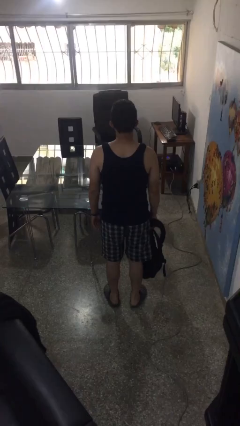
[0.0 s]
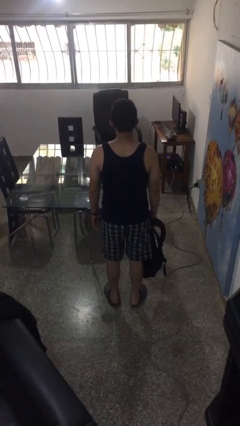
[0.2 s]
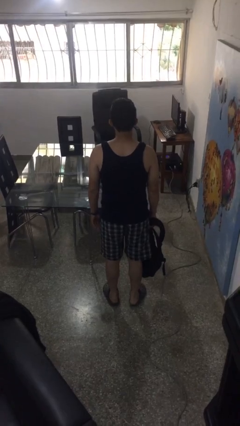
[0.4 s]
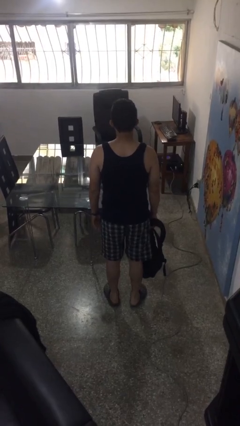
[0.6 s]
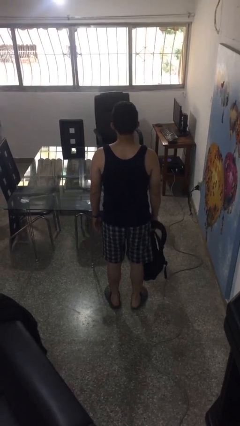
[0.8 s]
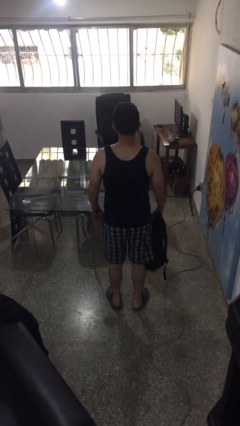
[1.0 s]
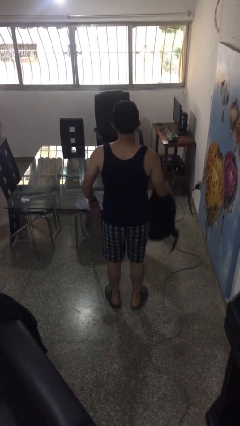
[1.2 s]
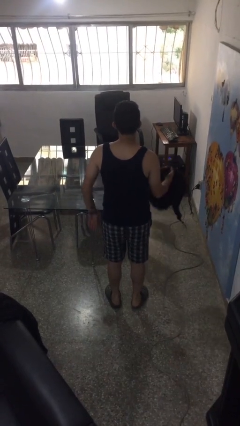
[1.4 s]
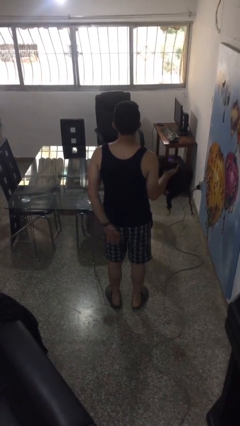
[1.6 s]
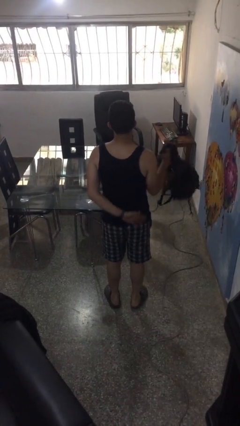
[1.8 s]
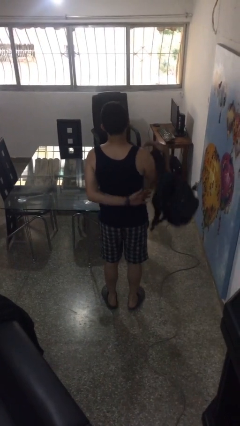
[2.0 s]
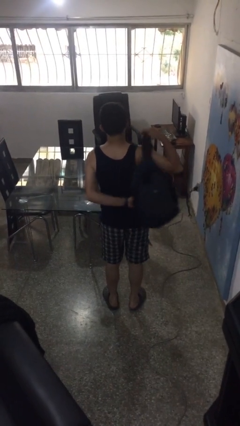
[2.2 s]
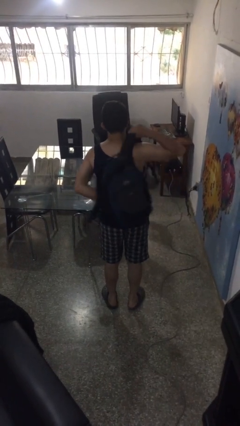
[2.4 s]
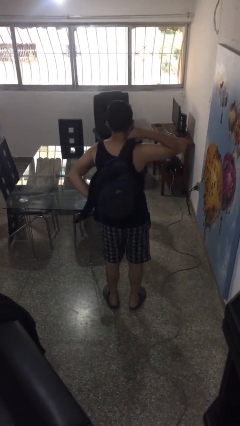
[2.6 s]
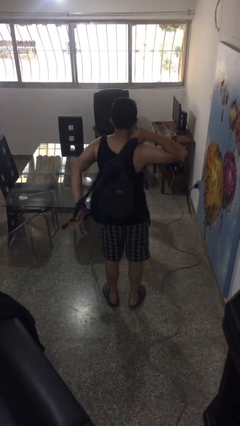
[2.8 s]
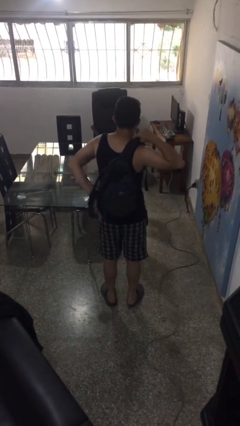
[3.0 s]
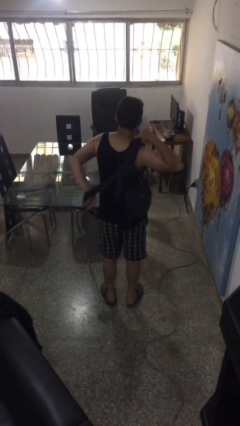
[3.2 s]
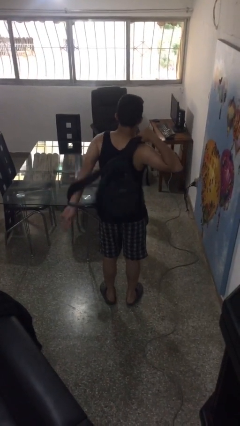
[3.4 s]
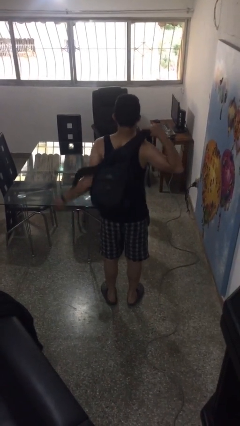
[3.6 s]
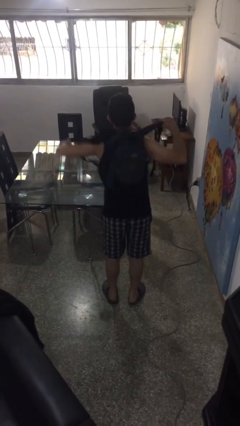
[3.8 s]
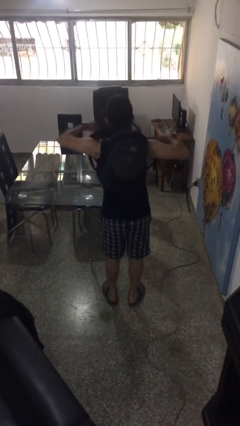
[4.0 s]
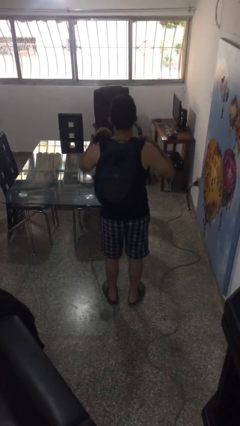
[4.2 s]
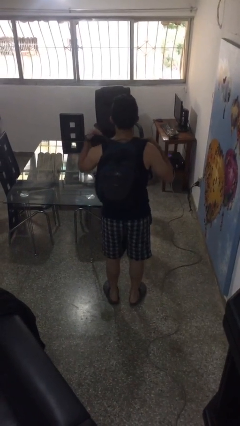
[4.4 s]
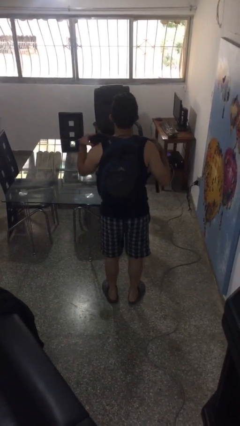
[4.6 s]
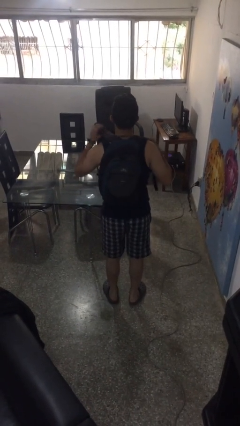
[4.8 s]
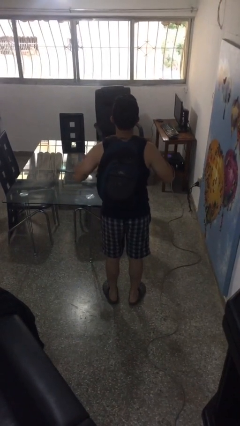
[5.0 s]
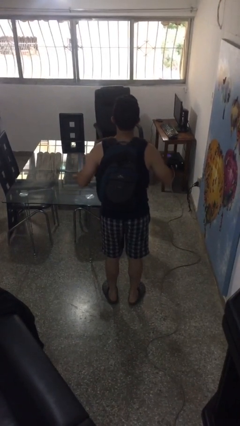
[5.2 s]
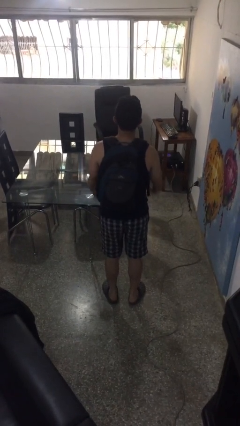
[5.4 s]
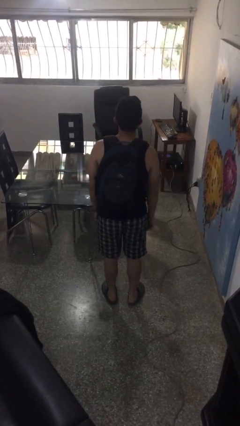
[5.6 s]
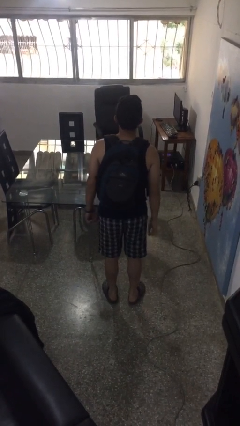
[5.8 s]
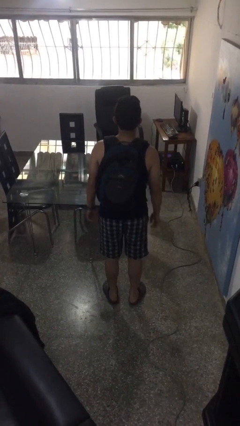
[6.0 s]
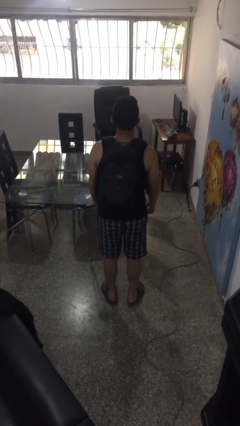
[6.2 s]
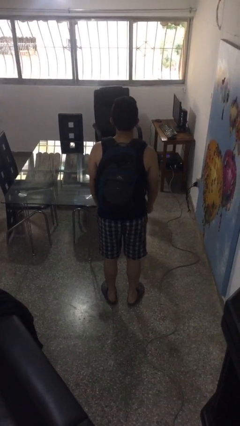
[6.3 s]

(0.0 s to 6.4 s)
person puts on backpack

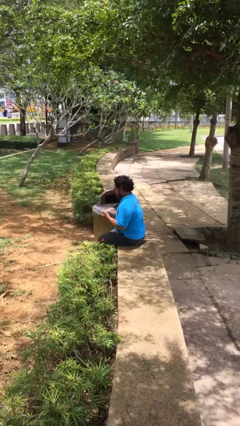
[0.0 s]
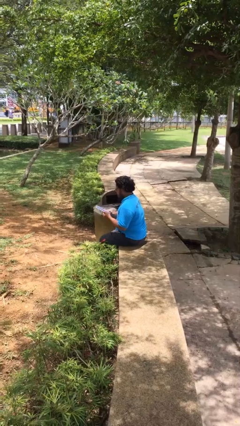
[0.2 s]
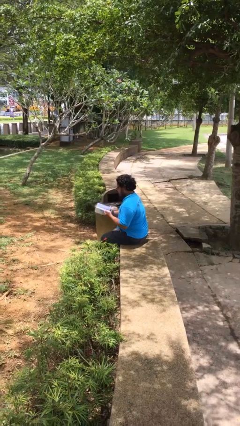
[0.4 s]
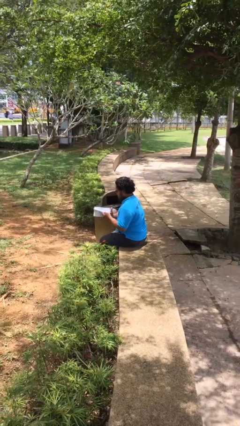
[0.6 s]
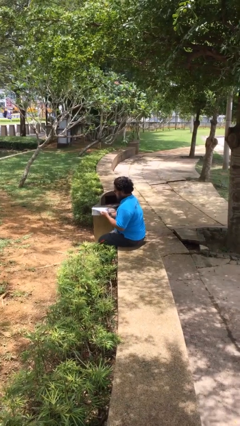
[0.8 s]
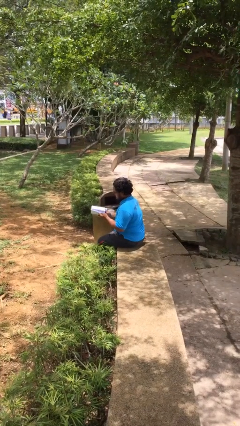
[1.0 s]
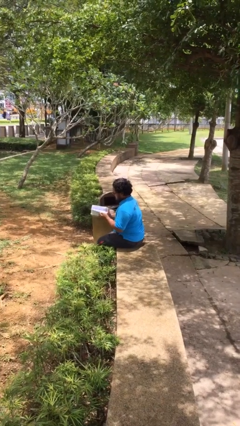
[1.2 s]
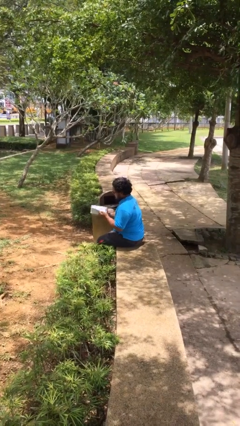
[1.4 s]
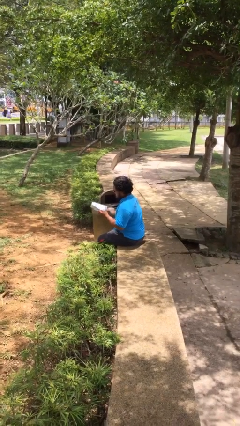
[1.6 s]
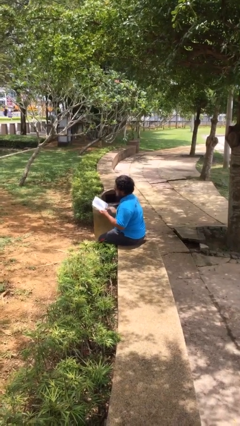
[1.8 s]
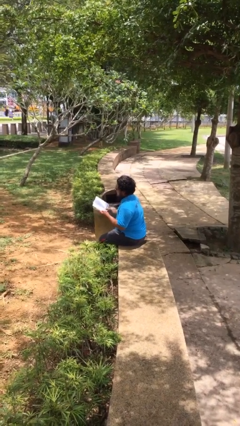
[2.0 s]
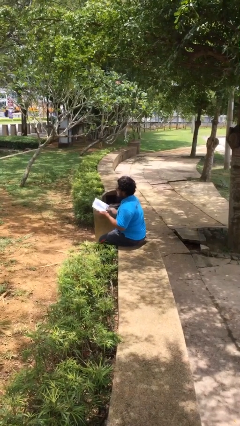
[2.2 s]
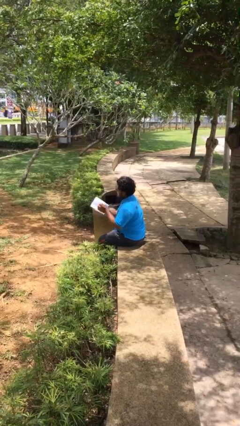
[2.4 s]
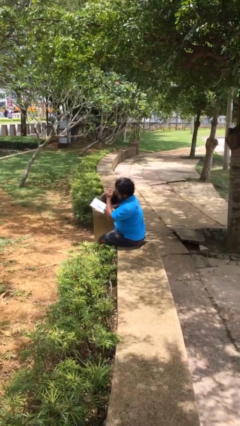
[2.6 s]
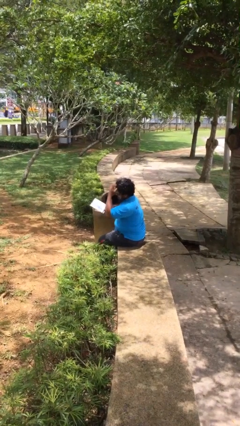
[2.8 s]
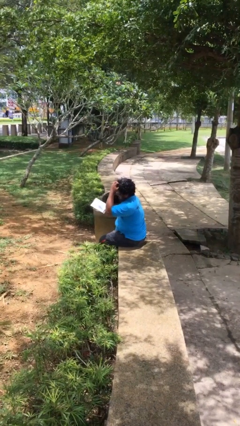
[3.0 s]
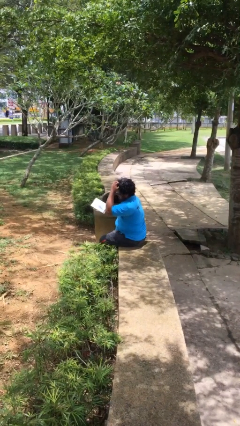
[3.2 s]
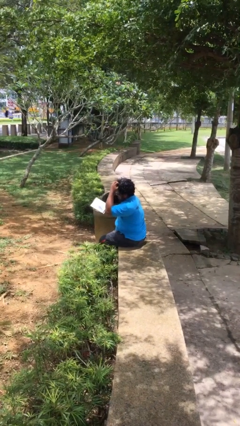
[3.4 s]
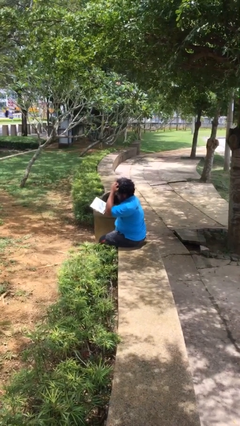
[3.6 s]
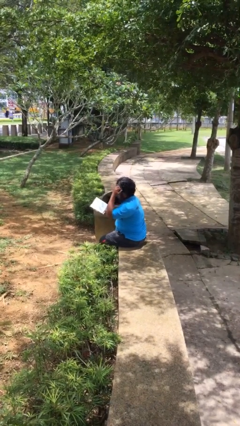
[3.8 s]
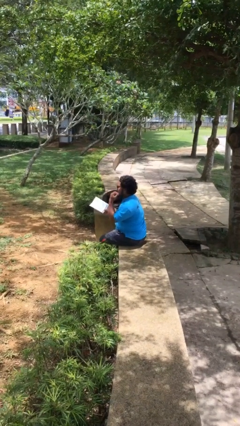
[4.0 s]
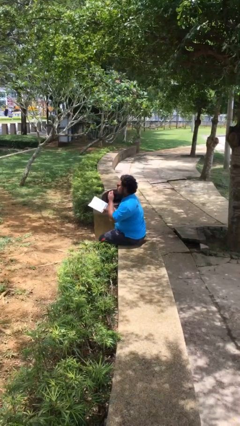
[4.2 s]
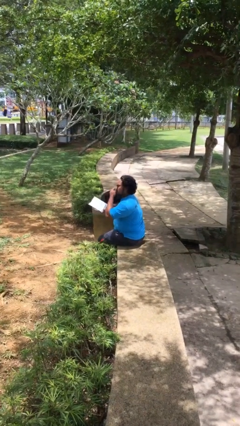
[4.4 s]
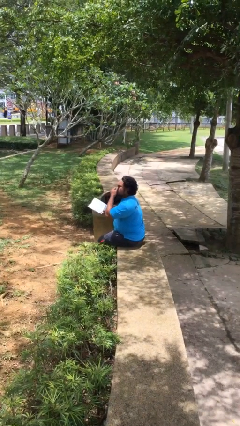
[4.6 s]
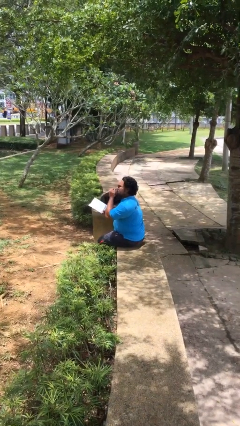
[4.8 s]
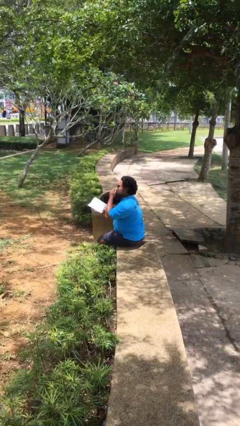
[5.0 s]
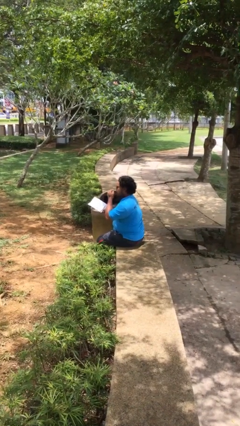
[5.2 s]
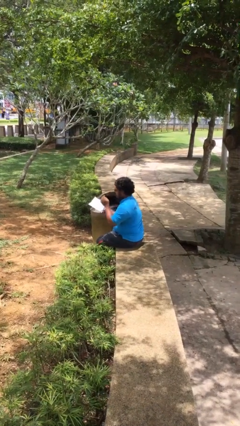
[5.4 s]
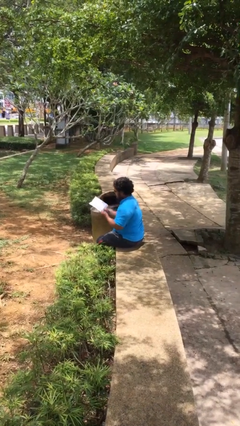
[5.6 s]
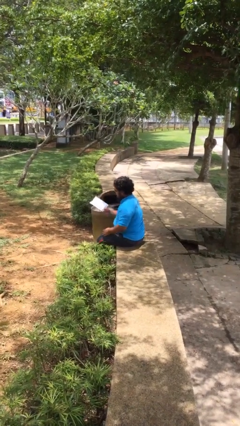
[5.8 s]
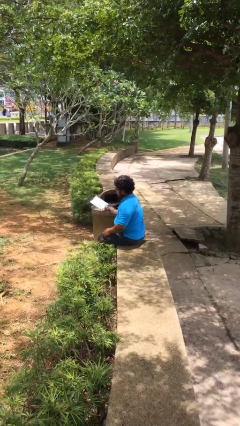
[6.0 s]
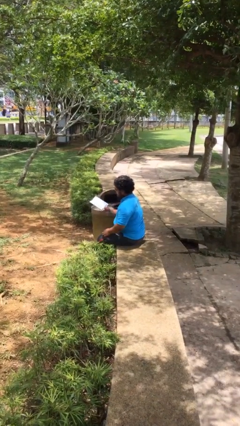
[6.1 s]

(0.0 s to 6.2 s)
person reads document

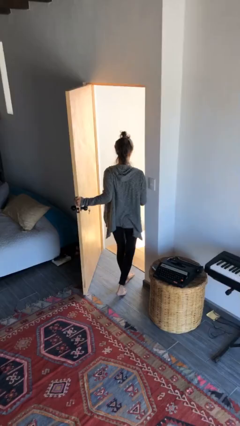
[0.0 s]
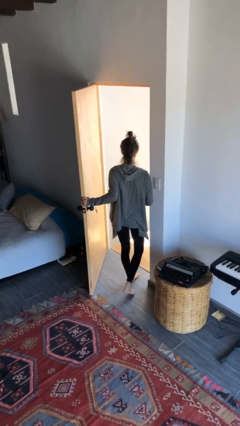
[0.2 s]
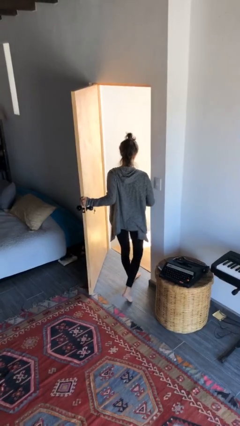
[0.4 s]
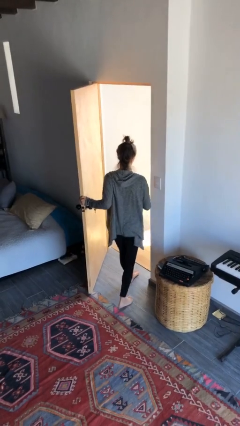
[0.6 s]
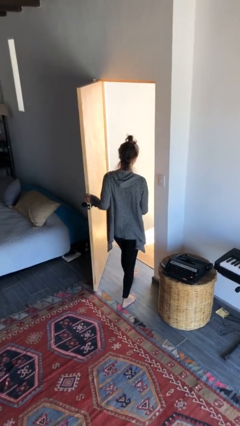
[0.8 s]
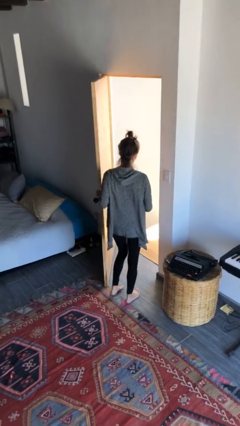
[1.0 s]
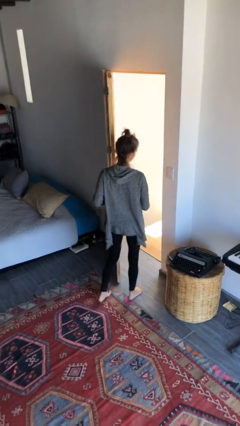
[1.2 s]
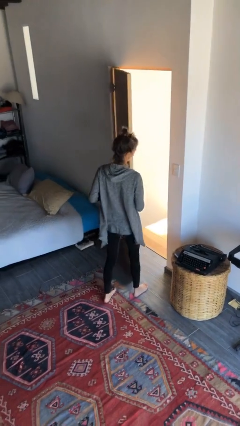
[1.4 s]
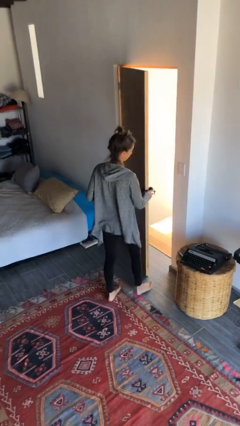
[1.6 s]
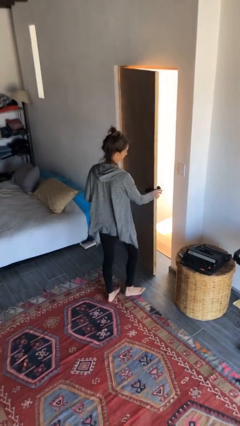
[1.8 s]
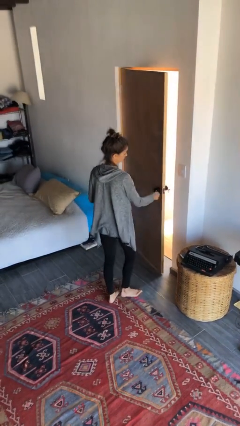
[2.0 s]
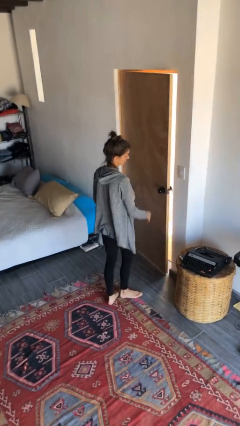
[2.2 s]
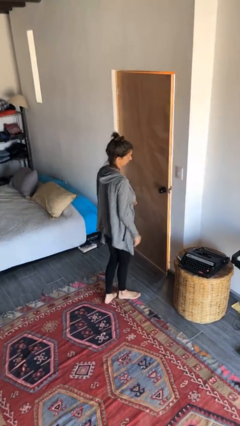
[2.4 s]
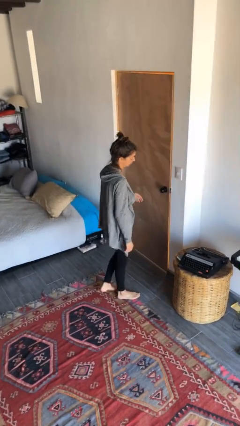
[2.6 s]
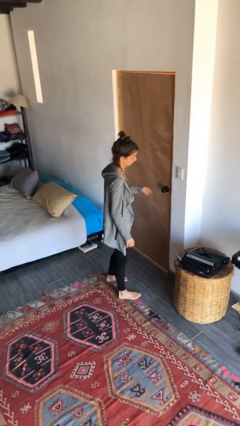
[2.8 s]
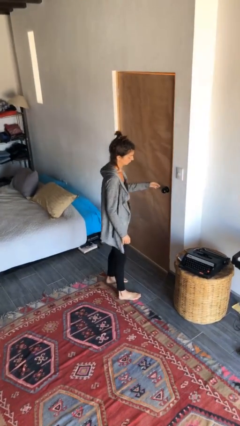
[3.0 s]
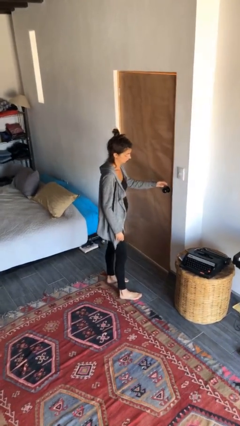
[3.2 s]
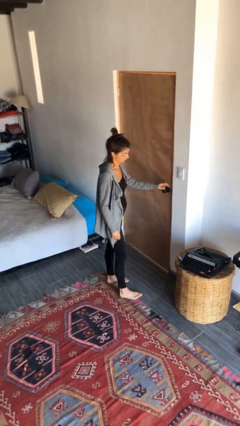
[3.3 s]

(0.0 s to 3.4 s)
person closes facility door

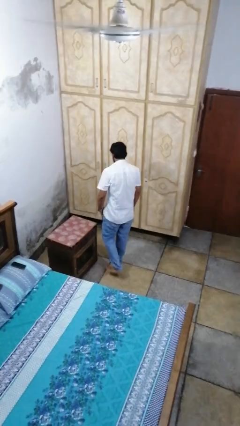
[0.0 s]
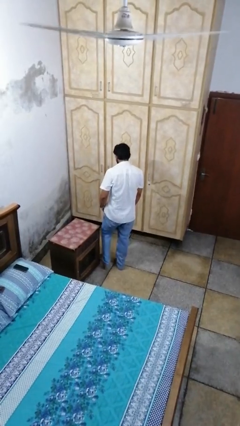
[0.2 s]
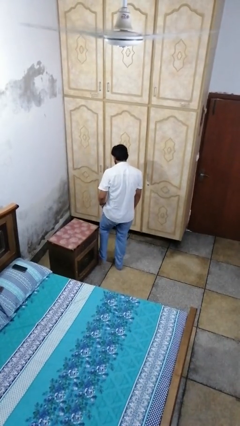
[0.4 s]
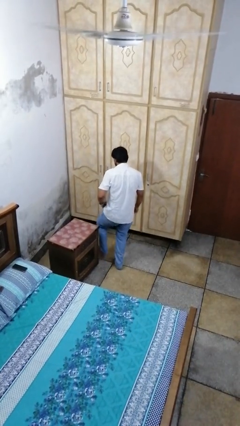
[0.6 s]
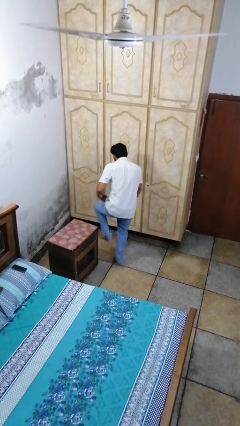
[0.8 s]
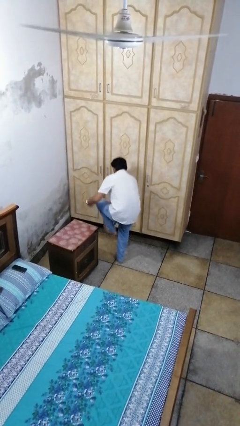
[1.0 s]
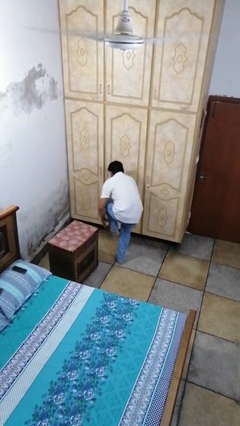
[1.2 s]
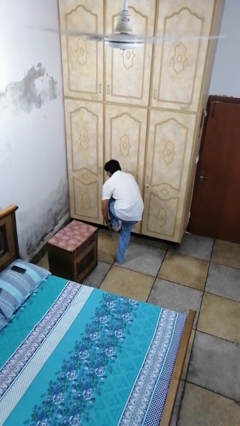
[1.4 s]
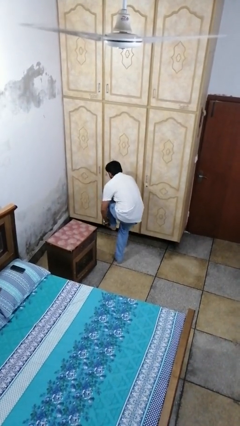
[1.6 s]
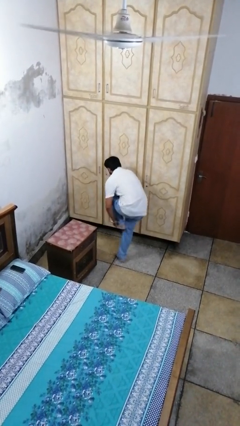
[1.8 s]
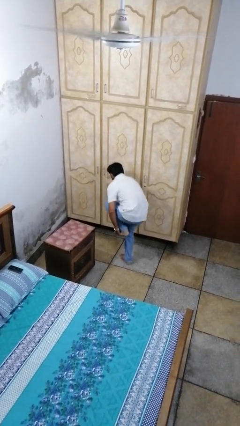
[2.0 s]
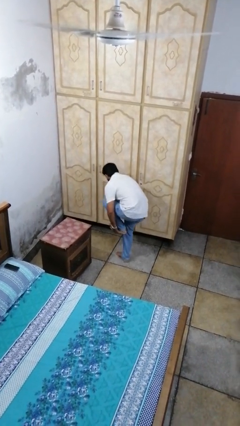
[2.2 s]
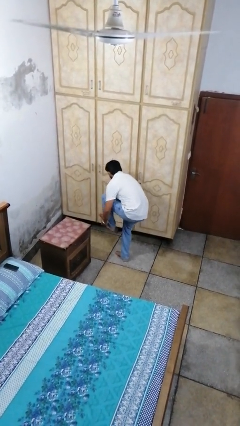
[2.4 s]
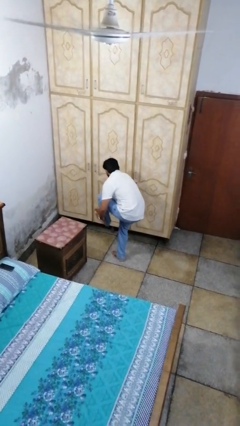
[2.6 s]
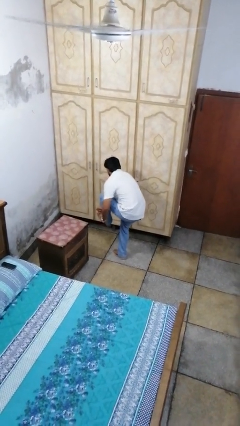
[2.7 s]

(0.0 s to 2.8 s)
person stubs toe
